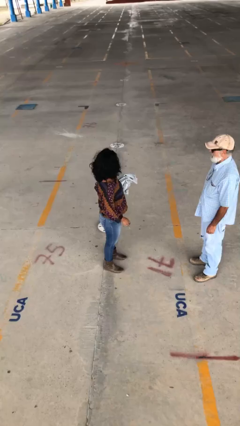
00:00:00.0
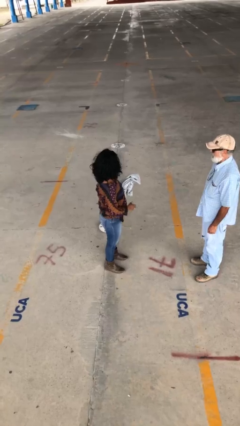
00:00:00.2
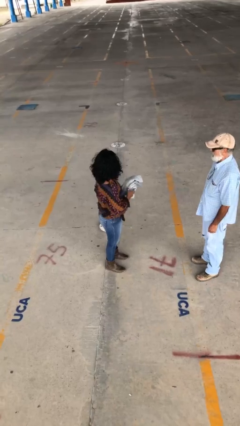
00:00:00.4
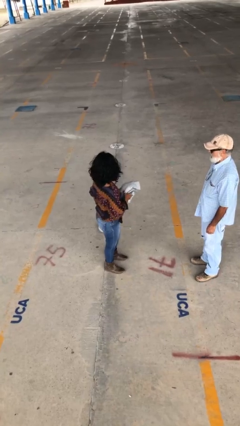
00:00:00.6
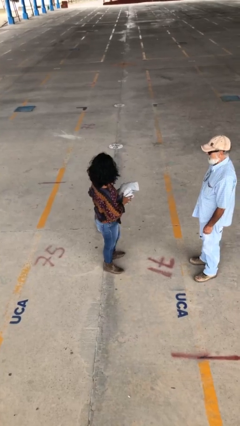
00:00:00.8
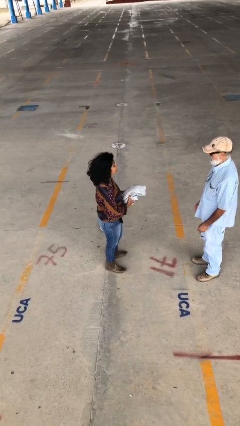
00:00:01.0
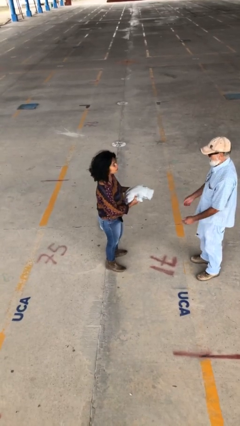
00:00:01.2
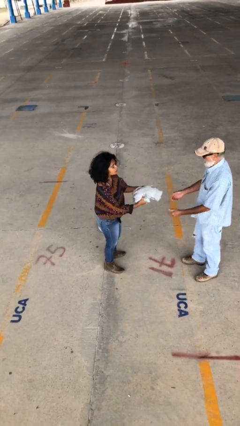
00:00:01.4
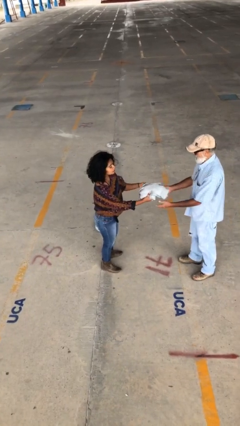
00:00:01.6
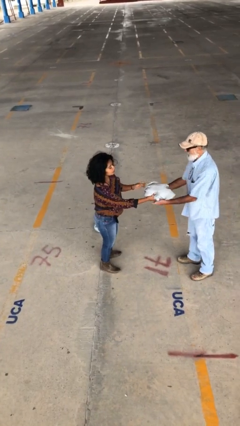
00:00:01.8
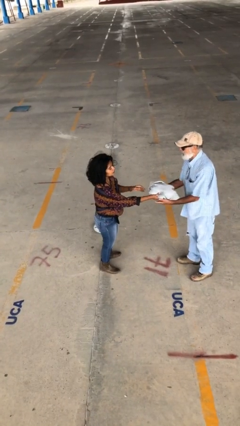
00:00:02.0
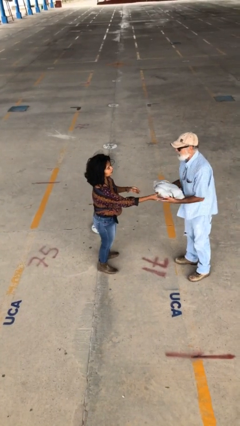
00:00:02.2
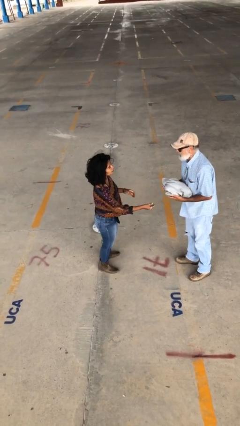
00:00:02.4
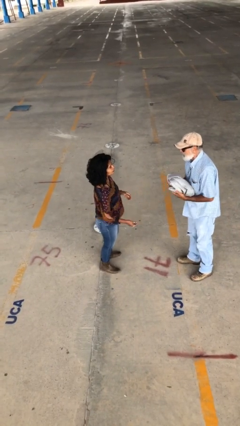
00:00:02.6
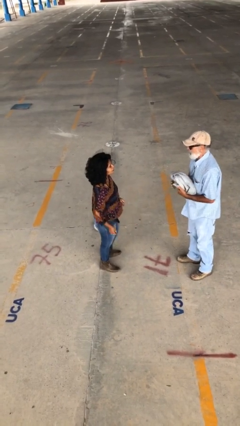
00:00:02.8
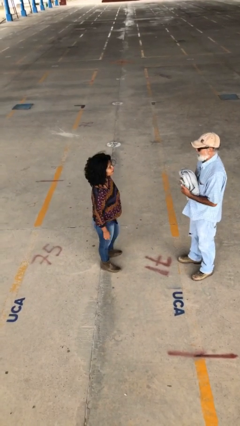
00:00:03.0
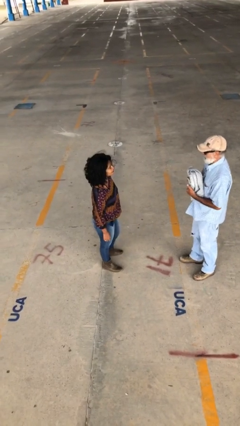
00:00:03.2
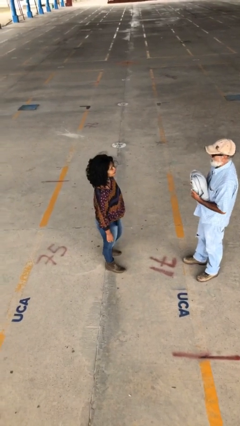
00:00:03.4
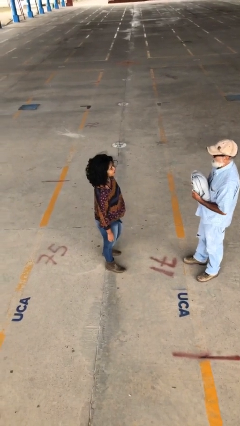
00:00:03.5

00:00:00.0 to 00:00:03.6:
person transfers object to person

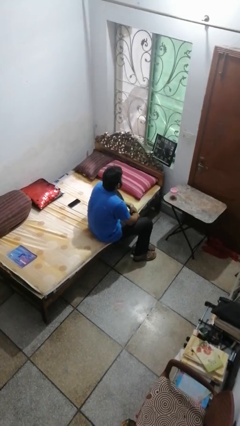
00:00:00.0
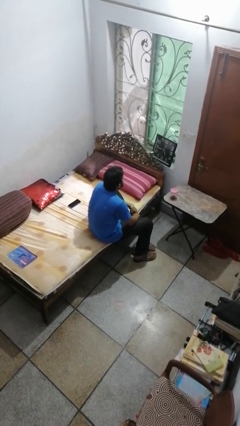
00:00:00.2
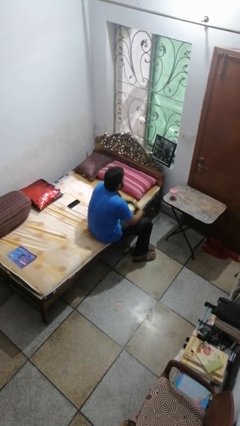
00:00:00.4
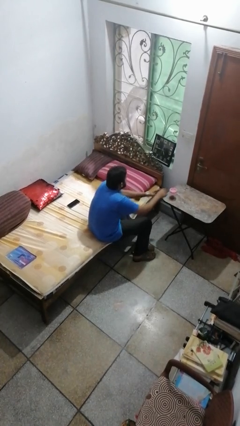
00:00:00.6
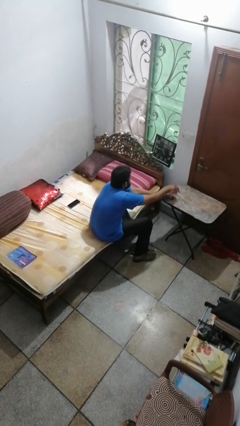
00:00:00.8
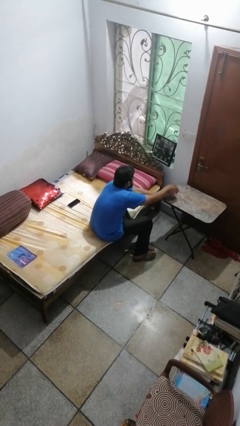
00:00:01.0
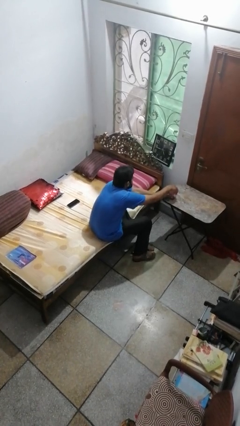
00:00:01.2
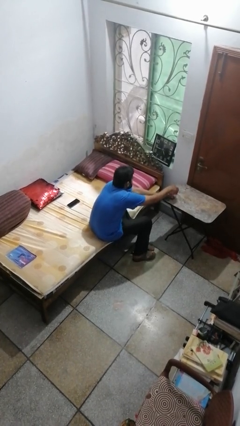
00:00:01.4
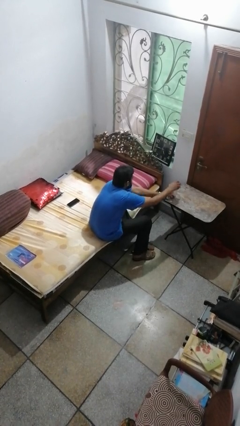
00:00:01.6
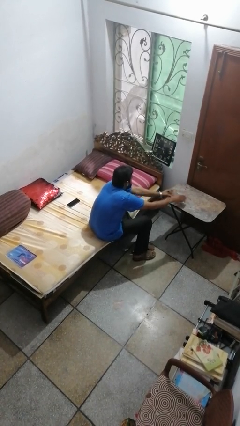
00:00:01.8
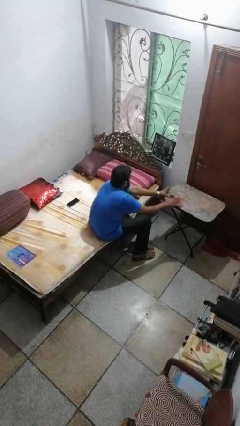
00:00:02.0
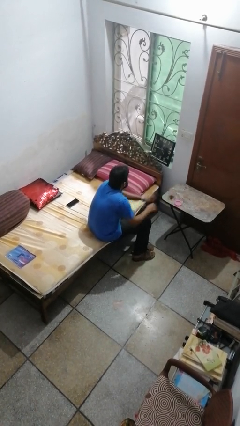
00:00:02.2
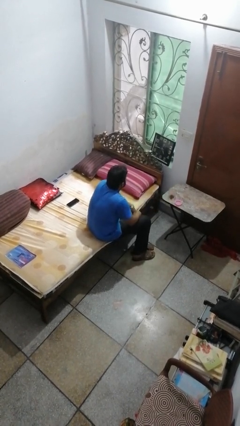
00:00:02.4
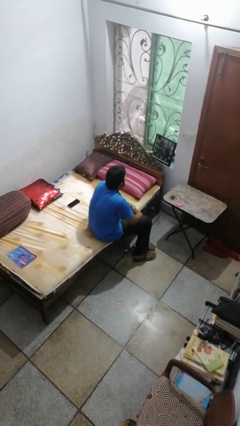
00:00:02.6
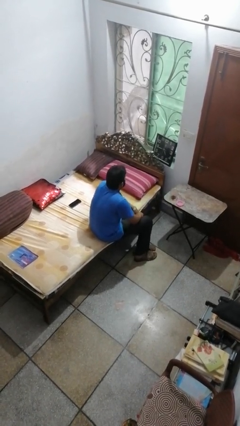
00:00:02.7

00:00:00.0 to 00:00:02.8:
person opens jar

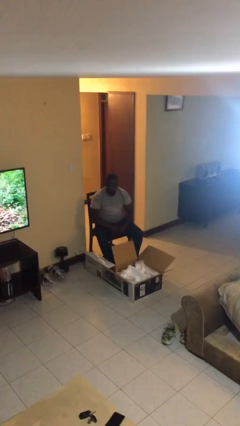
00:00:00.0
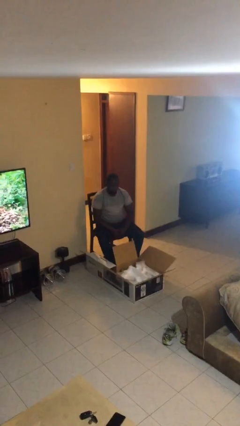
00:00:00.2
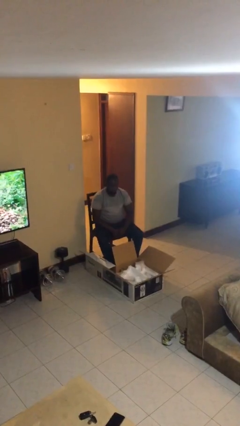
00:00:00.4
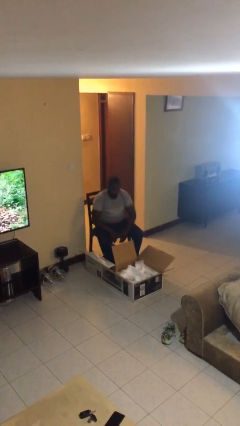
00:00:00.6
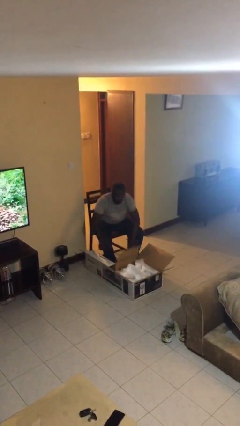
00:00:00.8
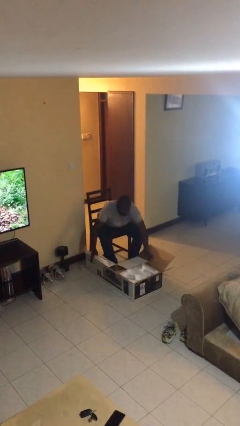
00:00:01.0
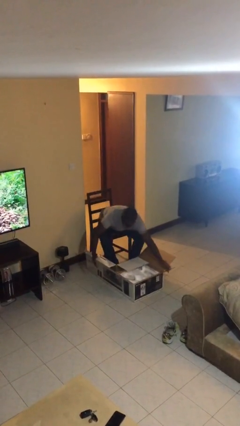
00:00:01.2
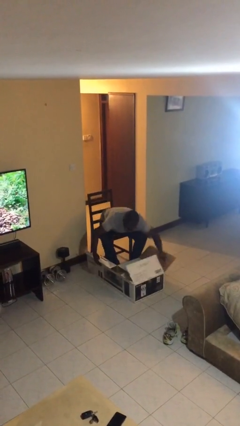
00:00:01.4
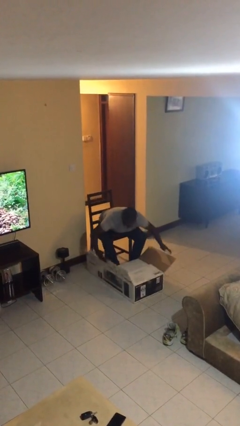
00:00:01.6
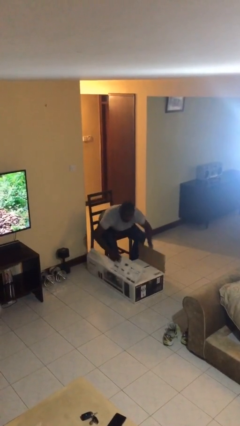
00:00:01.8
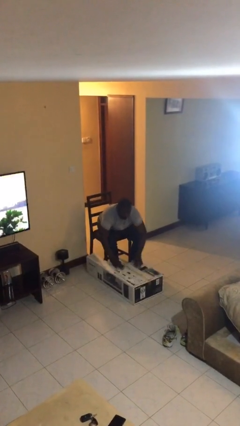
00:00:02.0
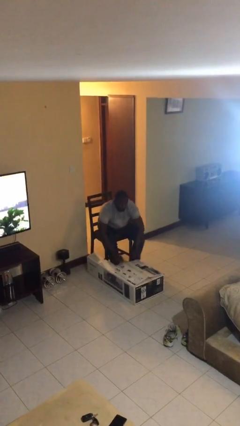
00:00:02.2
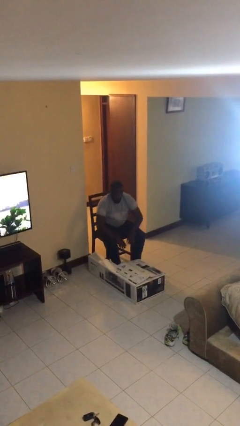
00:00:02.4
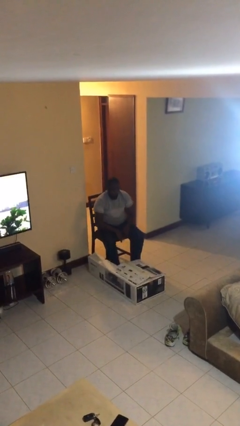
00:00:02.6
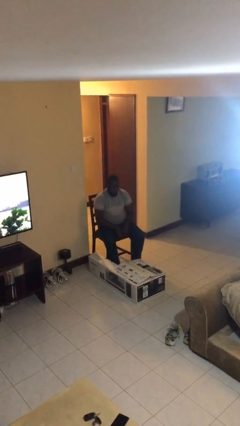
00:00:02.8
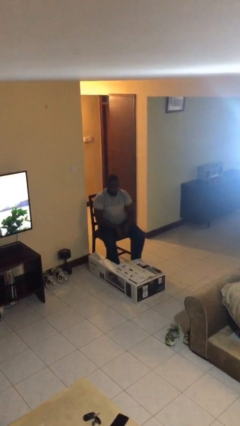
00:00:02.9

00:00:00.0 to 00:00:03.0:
person closes box

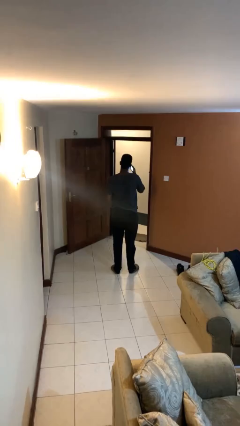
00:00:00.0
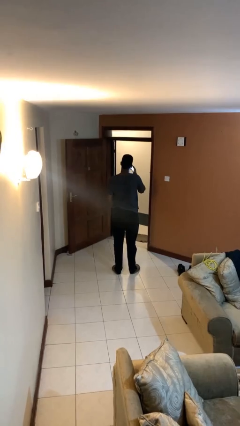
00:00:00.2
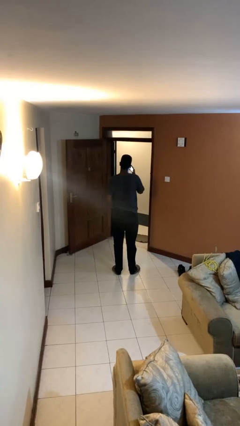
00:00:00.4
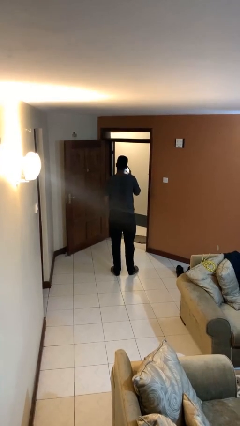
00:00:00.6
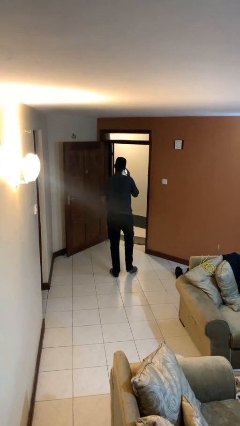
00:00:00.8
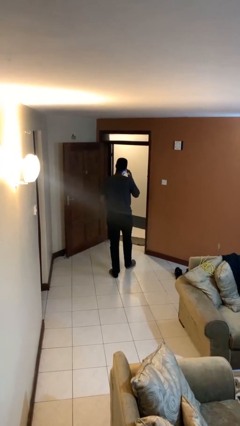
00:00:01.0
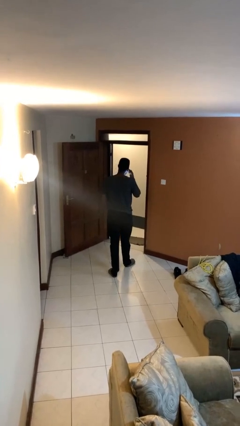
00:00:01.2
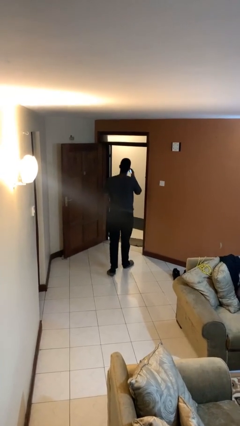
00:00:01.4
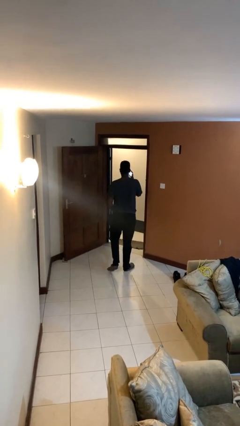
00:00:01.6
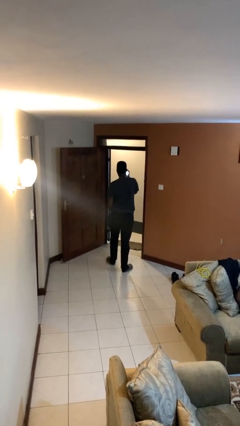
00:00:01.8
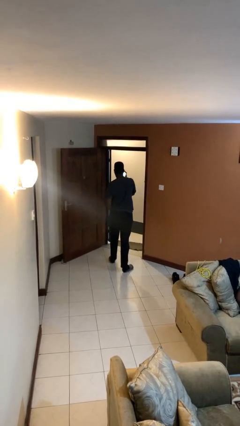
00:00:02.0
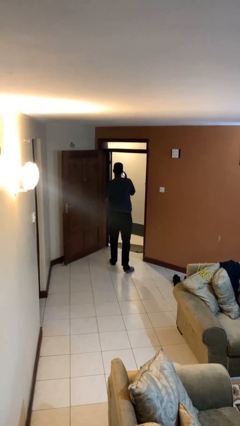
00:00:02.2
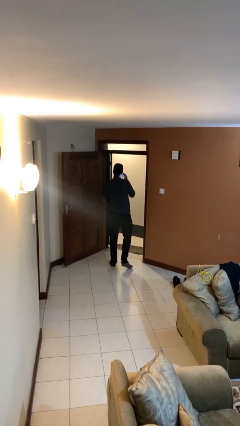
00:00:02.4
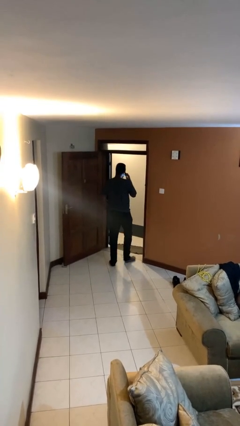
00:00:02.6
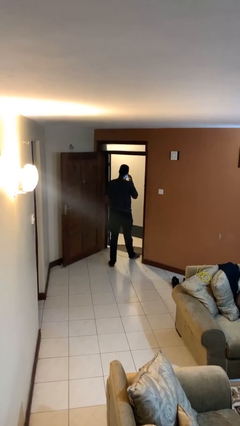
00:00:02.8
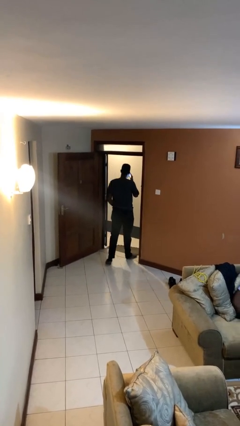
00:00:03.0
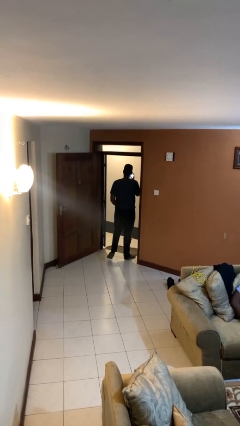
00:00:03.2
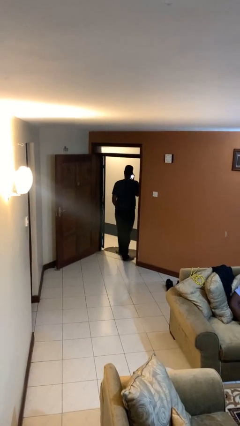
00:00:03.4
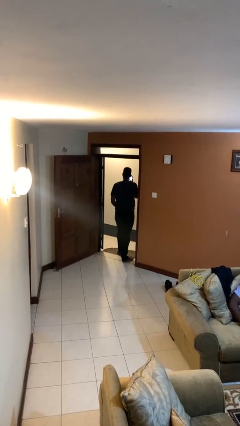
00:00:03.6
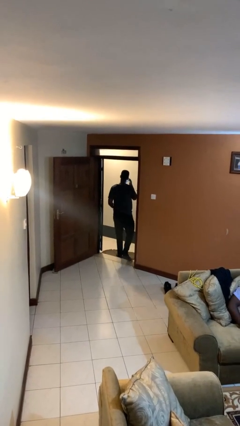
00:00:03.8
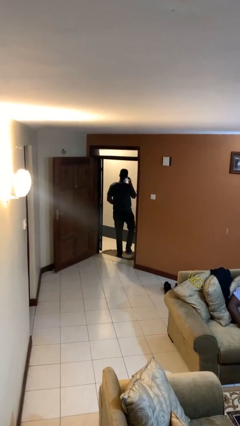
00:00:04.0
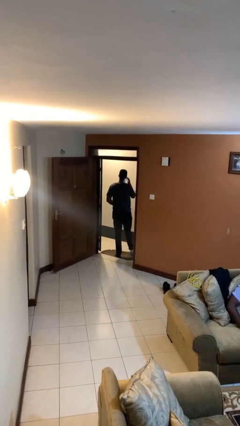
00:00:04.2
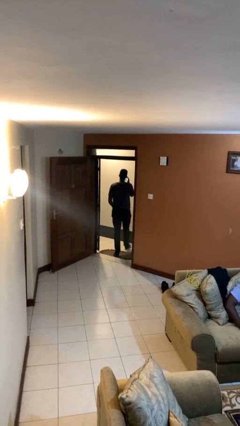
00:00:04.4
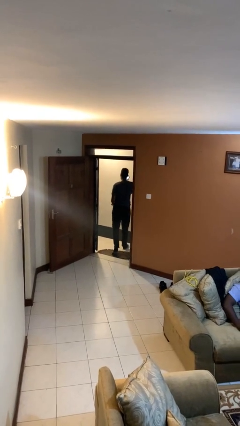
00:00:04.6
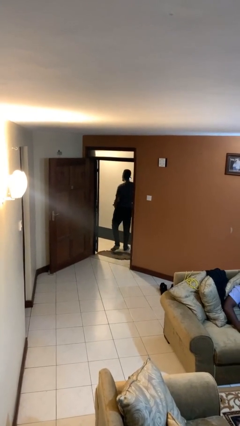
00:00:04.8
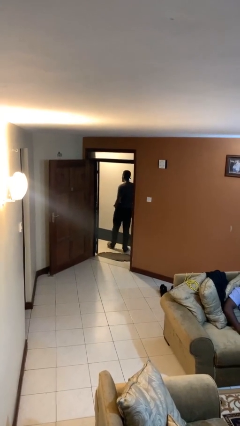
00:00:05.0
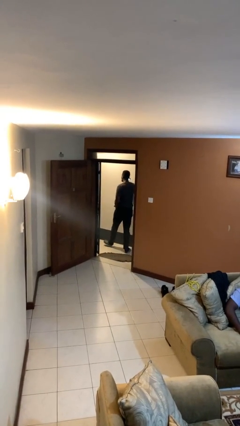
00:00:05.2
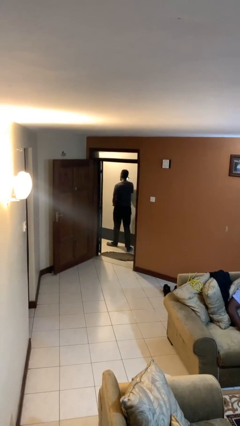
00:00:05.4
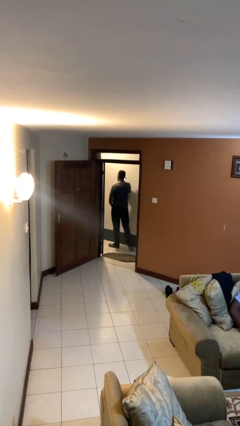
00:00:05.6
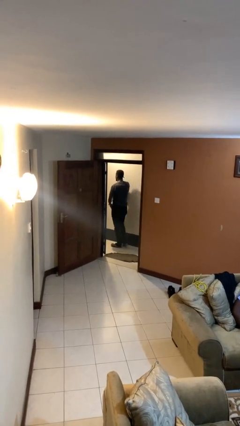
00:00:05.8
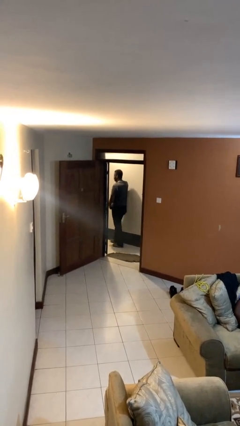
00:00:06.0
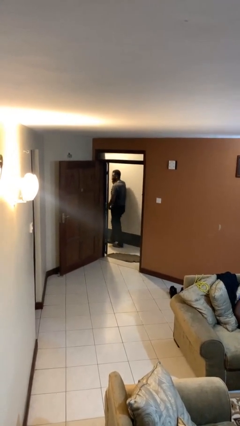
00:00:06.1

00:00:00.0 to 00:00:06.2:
person exits scene through structure

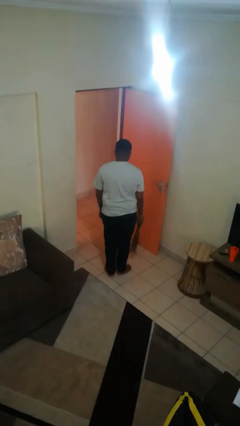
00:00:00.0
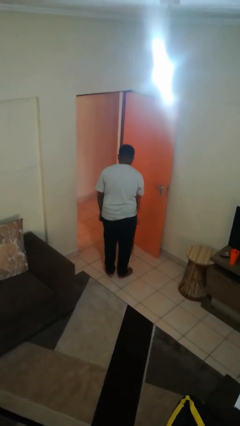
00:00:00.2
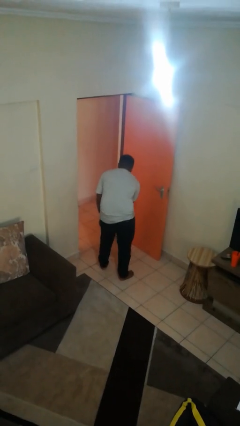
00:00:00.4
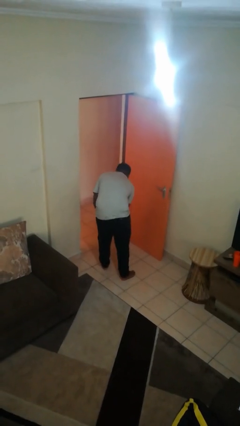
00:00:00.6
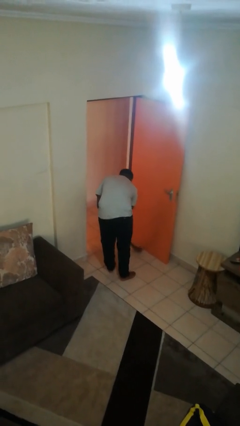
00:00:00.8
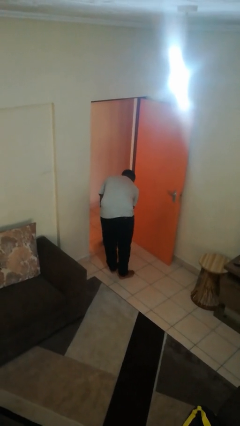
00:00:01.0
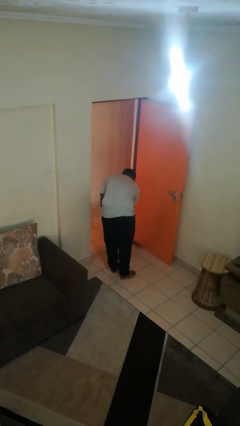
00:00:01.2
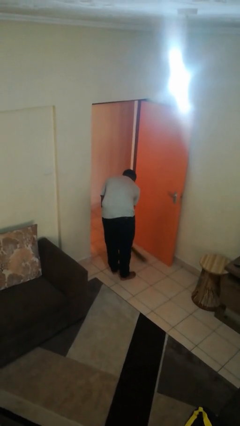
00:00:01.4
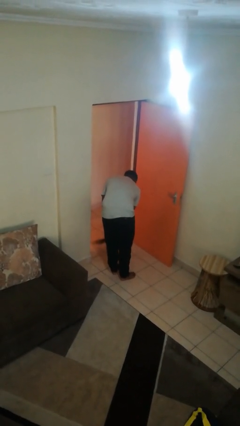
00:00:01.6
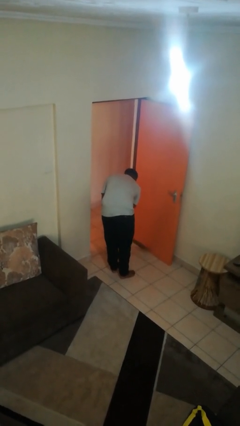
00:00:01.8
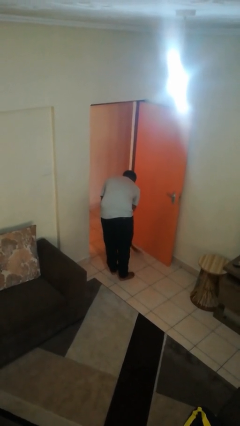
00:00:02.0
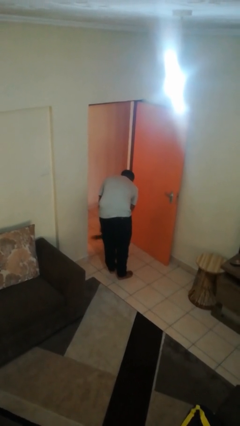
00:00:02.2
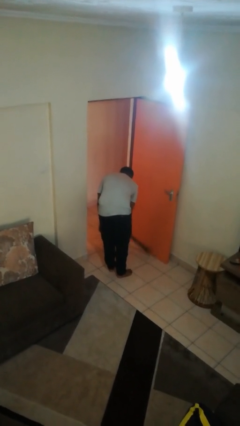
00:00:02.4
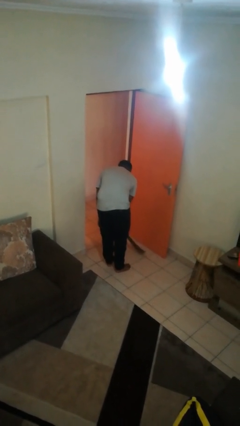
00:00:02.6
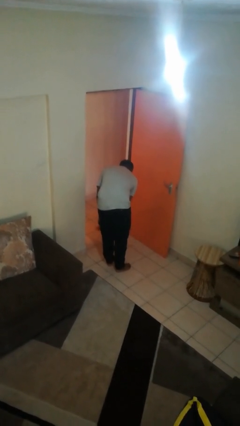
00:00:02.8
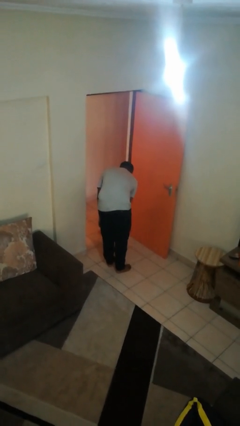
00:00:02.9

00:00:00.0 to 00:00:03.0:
person sweeps floor
